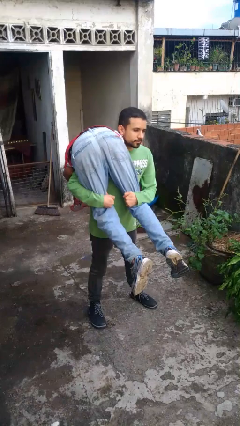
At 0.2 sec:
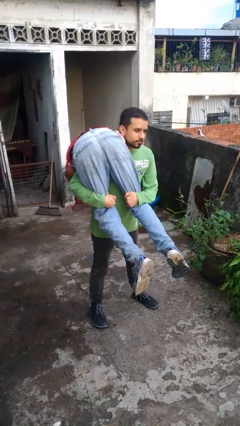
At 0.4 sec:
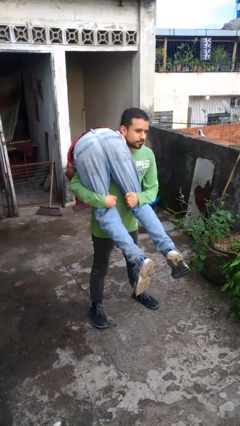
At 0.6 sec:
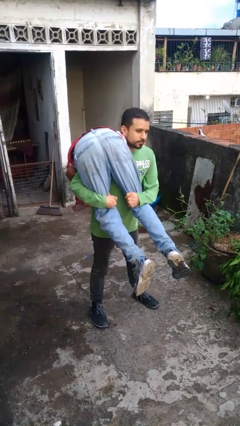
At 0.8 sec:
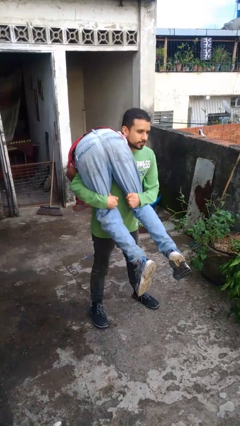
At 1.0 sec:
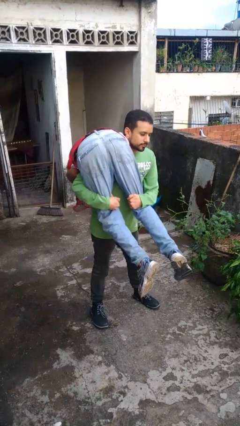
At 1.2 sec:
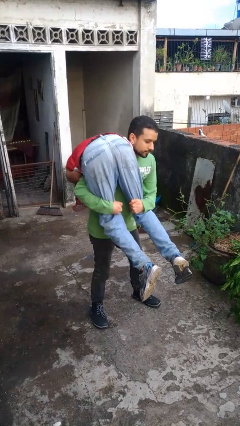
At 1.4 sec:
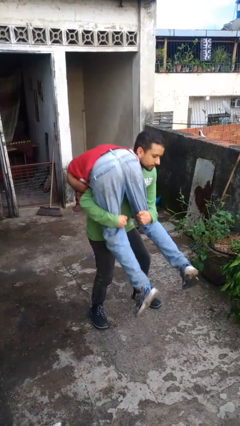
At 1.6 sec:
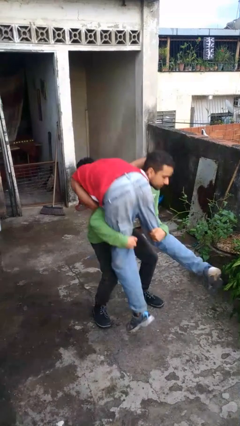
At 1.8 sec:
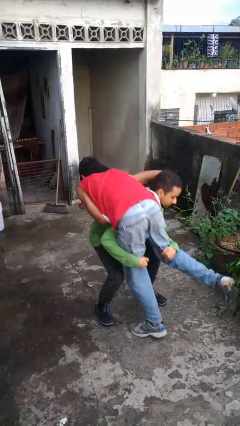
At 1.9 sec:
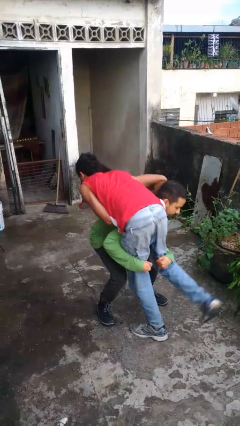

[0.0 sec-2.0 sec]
person puts down person

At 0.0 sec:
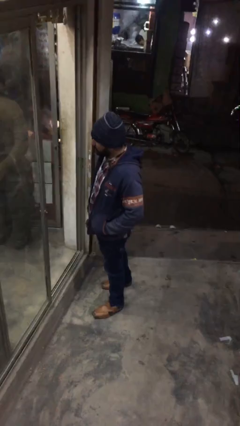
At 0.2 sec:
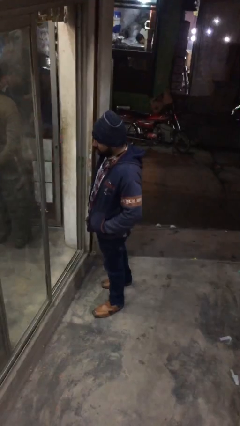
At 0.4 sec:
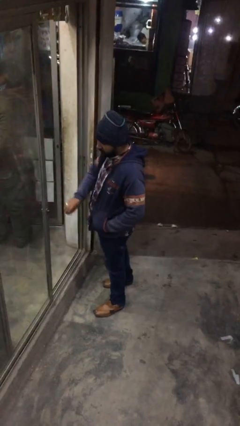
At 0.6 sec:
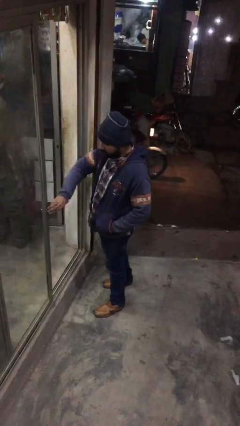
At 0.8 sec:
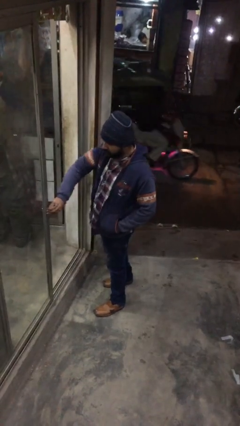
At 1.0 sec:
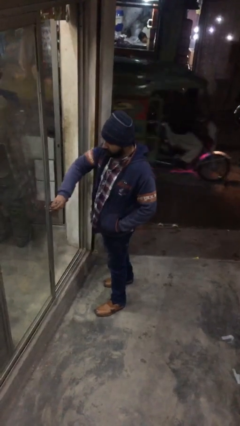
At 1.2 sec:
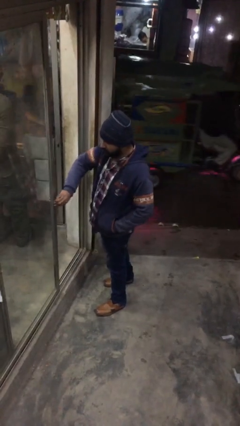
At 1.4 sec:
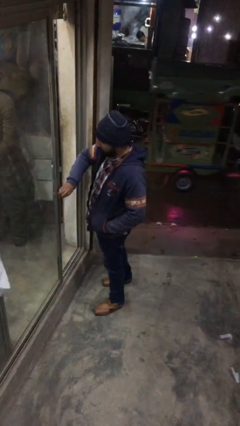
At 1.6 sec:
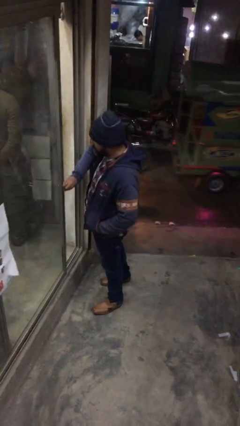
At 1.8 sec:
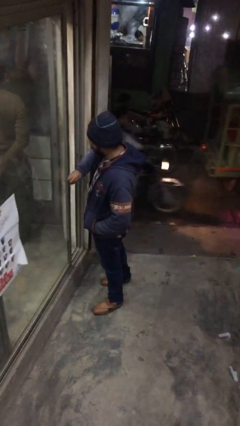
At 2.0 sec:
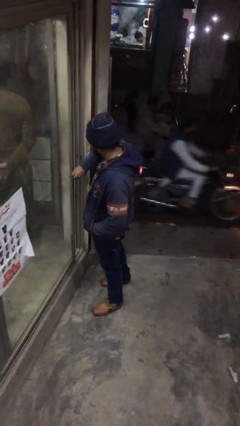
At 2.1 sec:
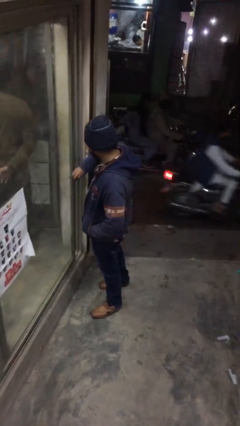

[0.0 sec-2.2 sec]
person closes facility door

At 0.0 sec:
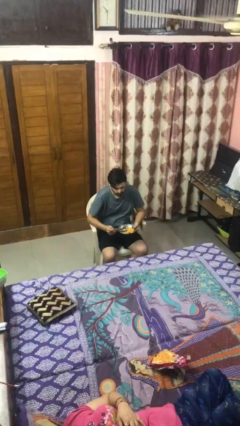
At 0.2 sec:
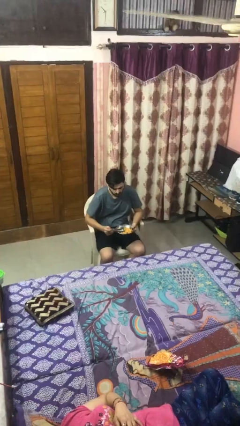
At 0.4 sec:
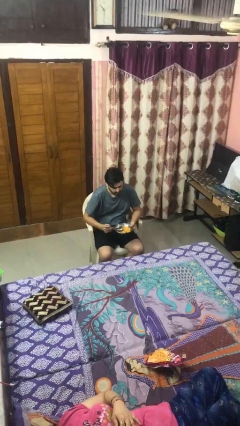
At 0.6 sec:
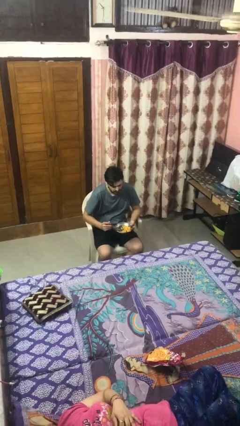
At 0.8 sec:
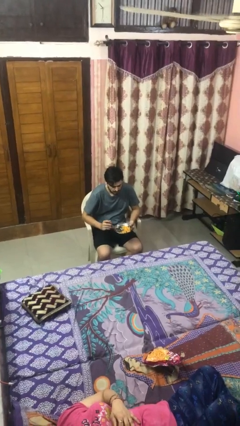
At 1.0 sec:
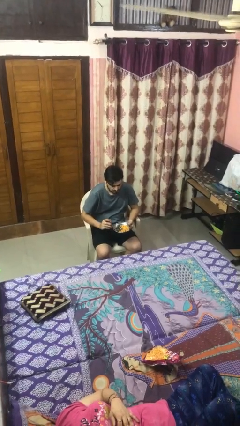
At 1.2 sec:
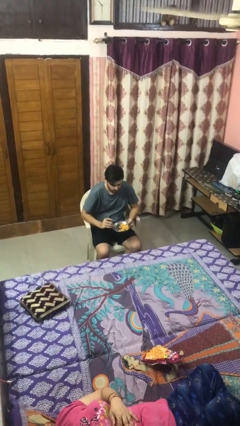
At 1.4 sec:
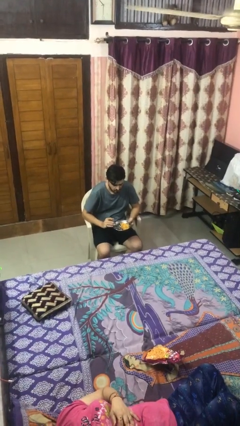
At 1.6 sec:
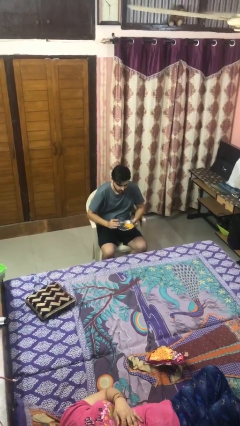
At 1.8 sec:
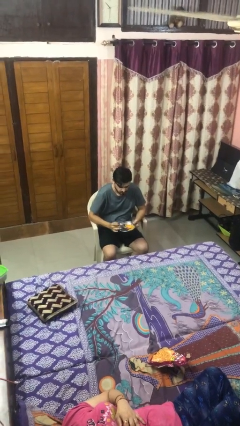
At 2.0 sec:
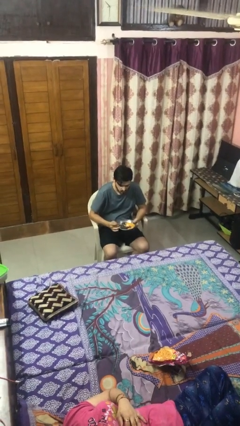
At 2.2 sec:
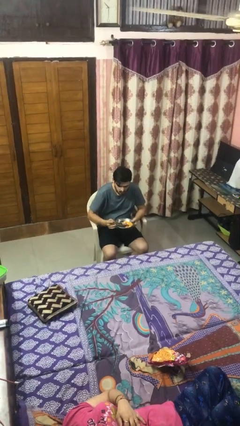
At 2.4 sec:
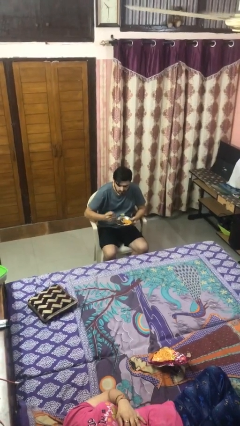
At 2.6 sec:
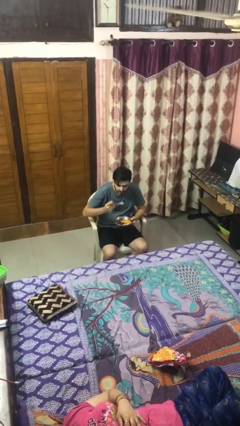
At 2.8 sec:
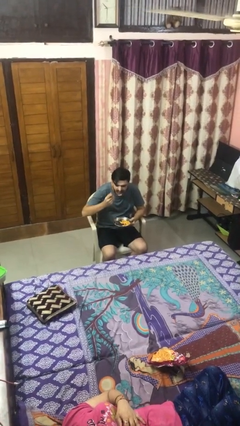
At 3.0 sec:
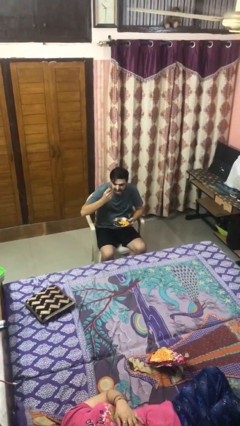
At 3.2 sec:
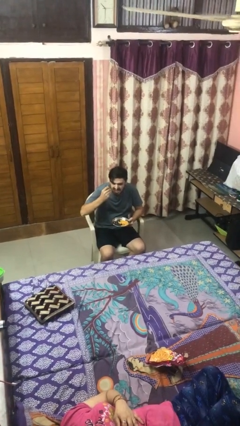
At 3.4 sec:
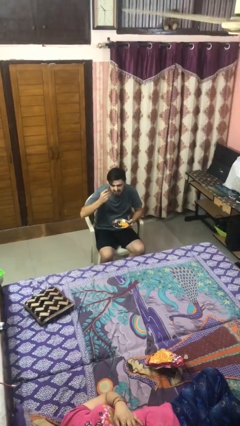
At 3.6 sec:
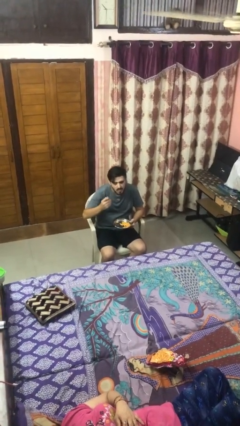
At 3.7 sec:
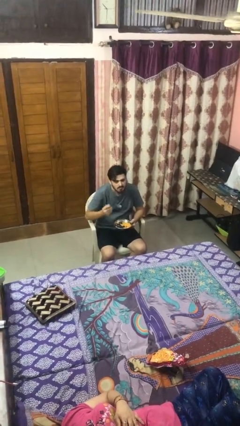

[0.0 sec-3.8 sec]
person eats with utensil

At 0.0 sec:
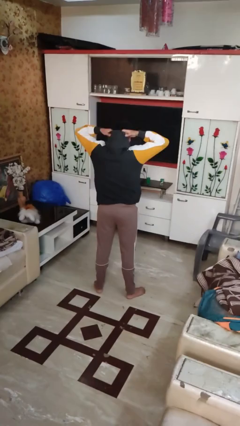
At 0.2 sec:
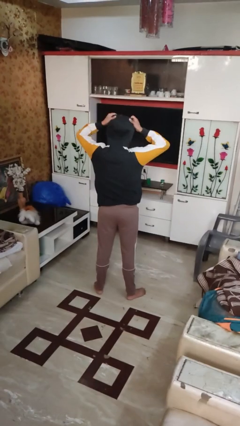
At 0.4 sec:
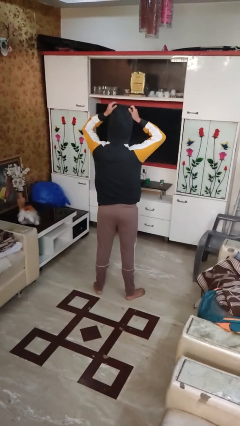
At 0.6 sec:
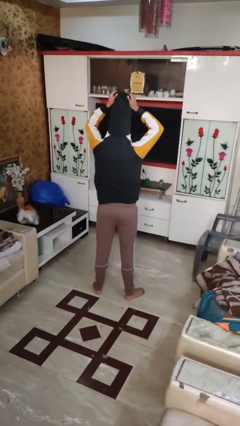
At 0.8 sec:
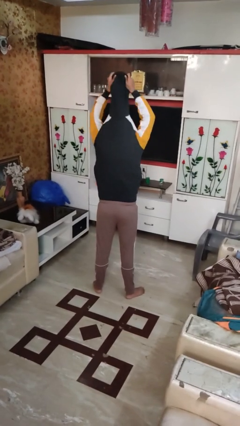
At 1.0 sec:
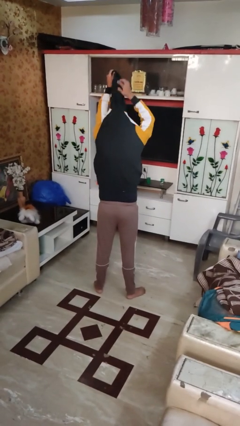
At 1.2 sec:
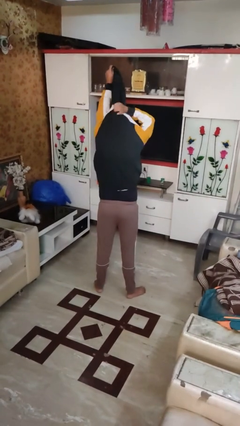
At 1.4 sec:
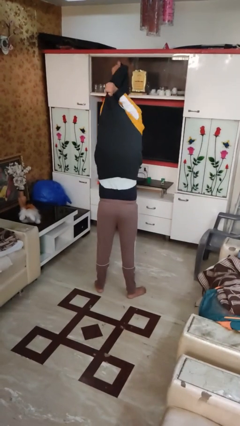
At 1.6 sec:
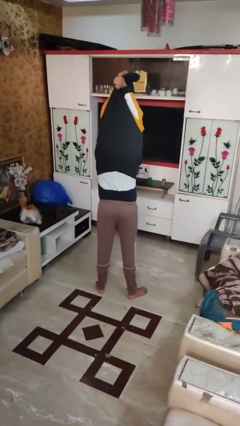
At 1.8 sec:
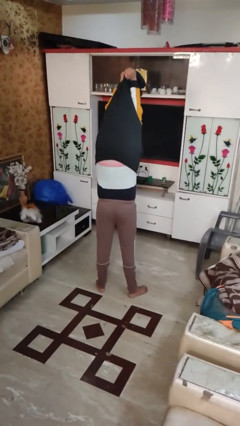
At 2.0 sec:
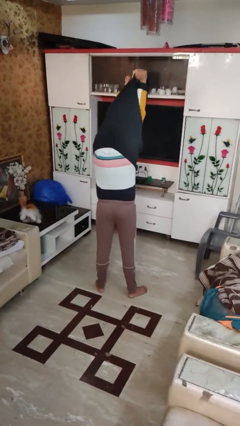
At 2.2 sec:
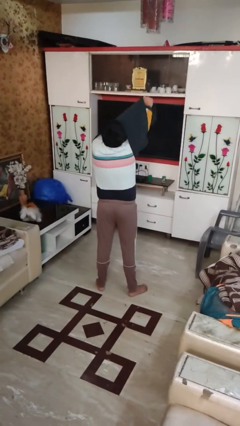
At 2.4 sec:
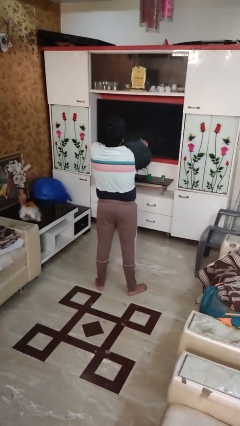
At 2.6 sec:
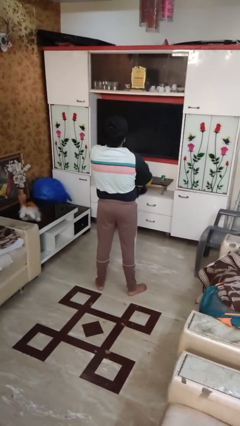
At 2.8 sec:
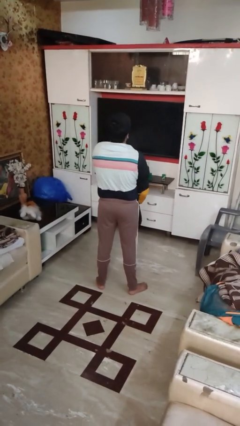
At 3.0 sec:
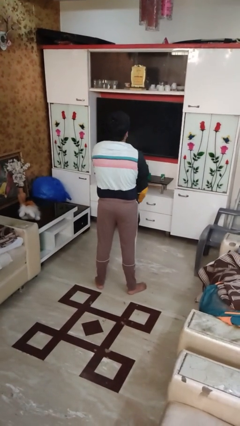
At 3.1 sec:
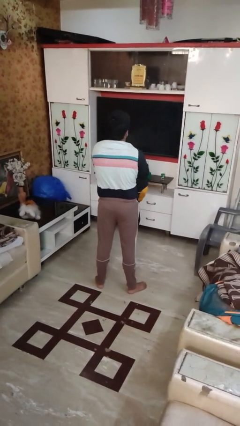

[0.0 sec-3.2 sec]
person takes off hoodie

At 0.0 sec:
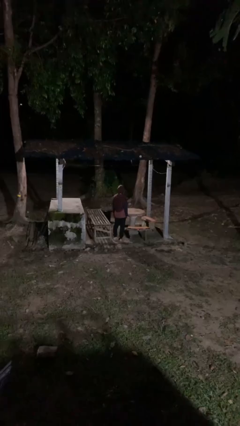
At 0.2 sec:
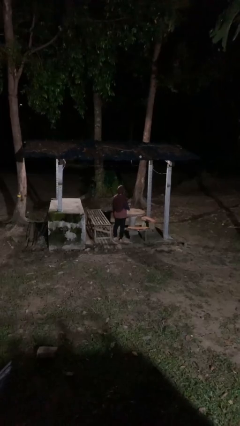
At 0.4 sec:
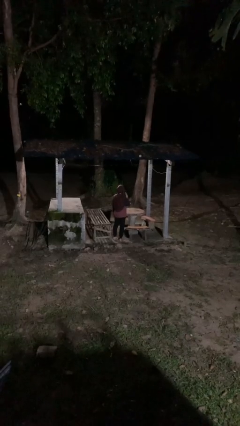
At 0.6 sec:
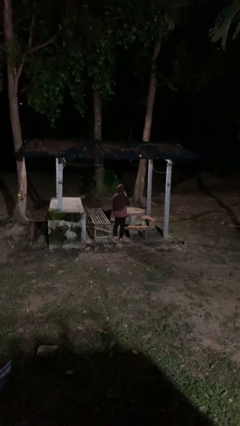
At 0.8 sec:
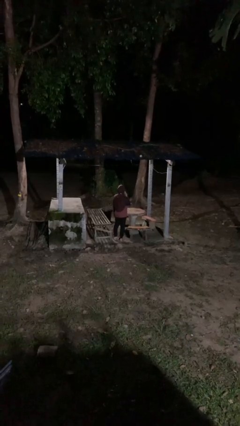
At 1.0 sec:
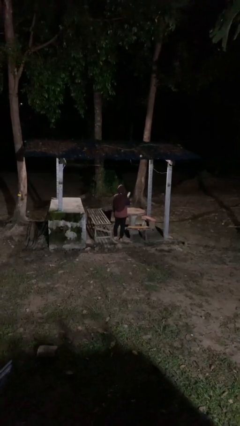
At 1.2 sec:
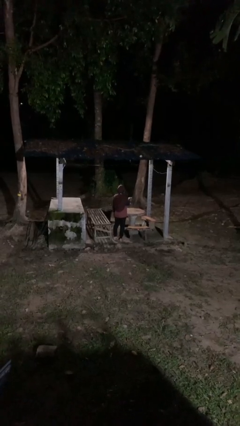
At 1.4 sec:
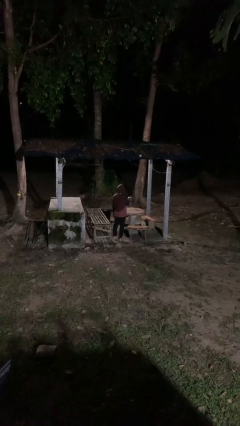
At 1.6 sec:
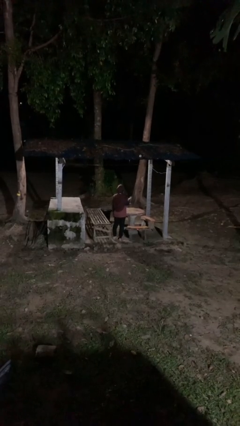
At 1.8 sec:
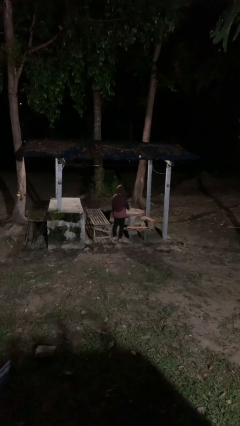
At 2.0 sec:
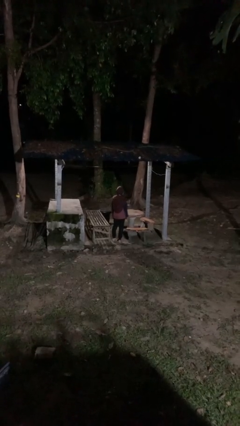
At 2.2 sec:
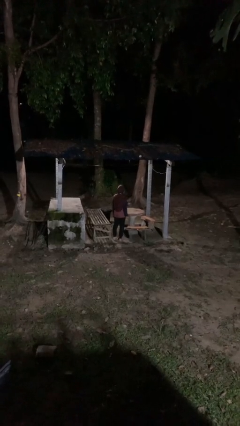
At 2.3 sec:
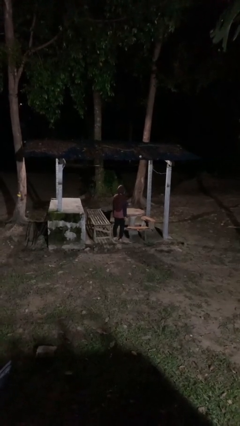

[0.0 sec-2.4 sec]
person gestures blow kiss

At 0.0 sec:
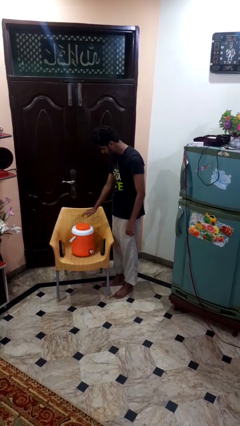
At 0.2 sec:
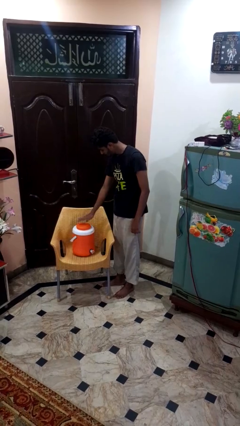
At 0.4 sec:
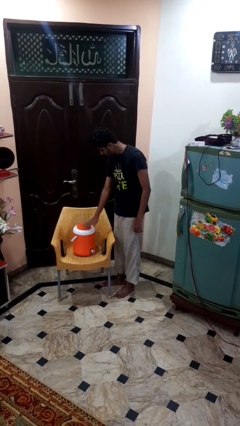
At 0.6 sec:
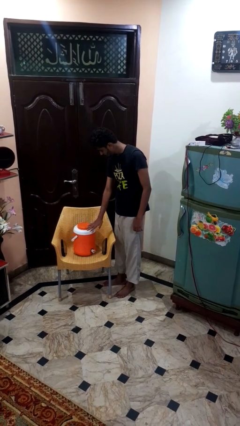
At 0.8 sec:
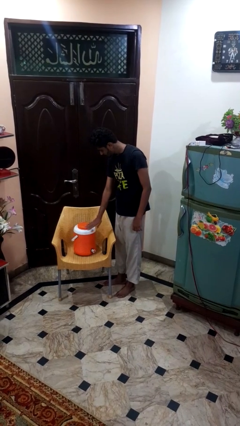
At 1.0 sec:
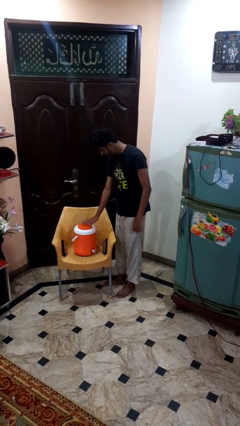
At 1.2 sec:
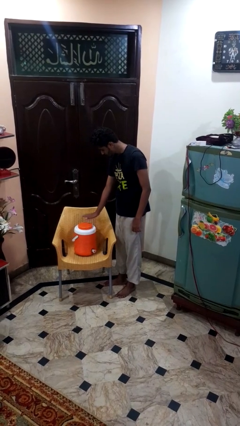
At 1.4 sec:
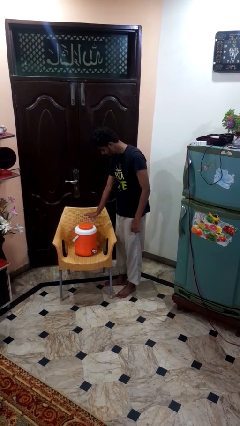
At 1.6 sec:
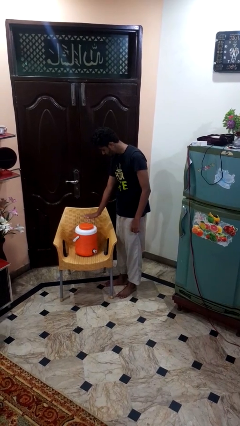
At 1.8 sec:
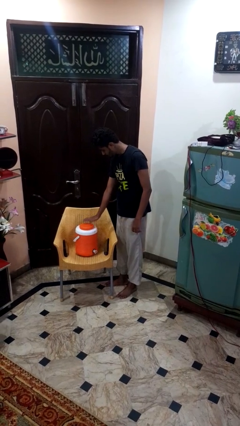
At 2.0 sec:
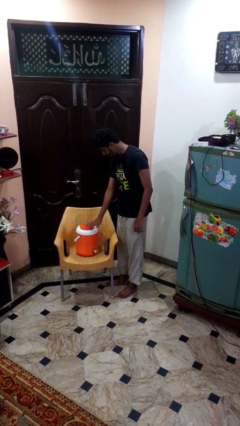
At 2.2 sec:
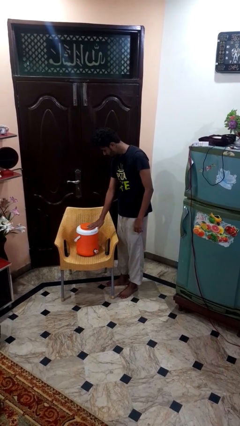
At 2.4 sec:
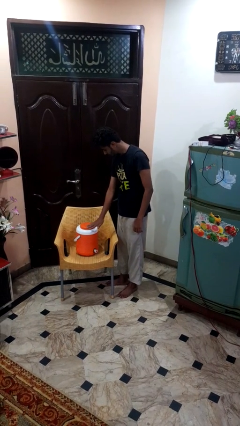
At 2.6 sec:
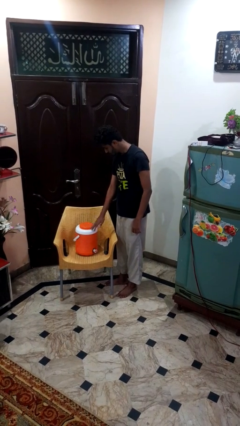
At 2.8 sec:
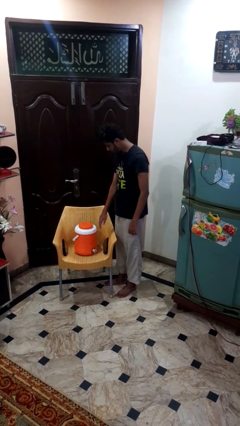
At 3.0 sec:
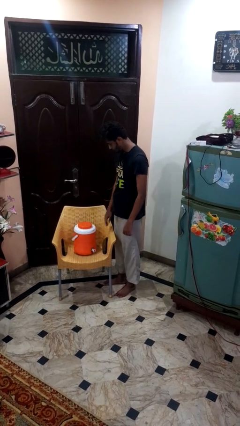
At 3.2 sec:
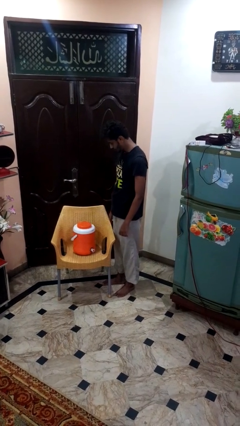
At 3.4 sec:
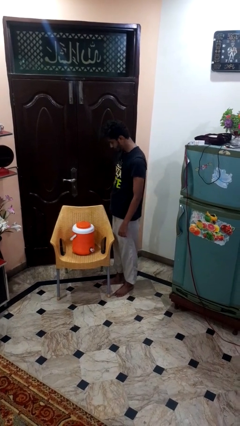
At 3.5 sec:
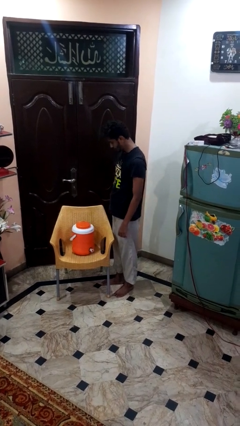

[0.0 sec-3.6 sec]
person waves hand over object

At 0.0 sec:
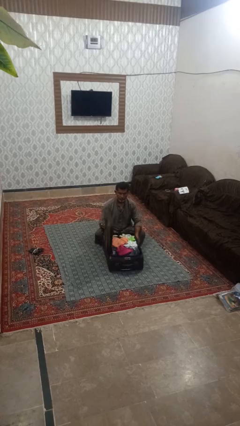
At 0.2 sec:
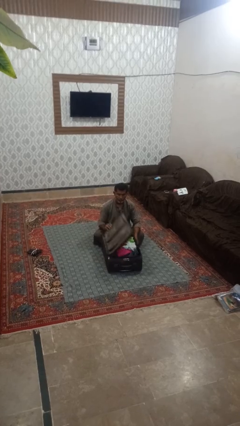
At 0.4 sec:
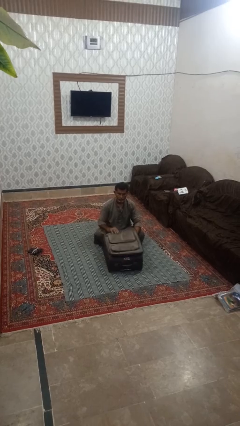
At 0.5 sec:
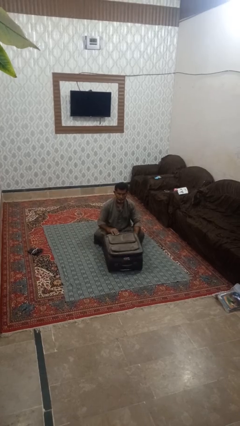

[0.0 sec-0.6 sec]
person closes suitcase
